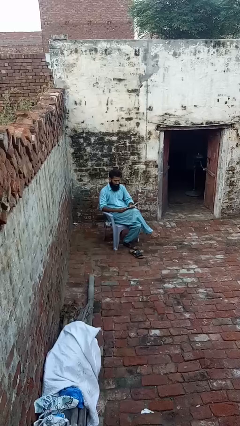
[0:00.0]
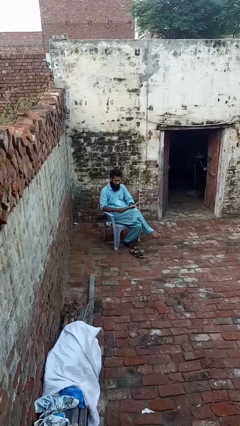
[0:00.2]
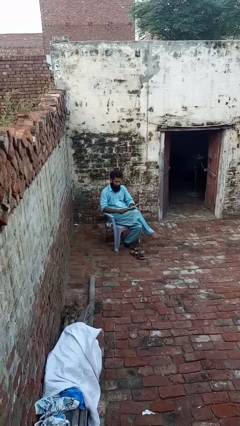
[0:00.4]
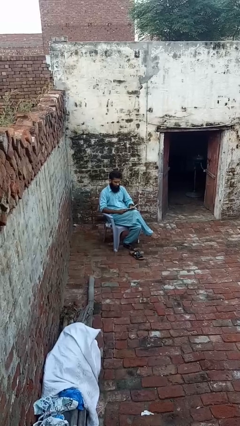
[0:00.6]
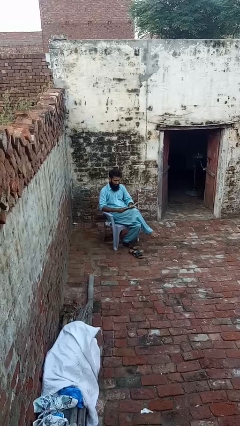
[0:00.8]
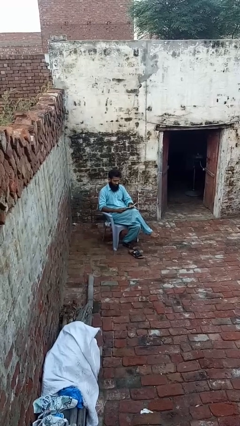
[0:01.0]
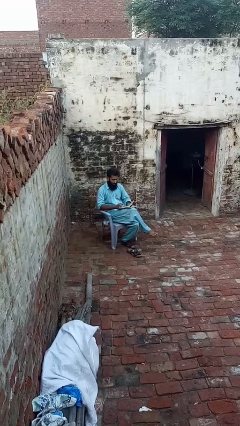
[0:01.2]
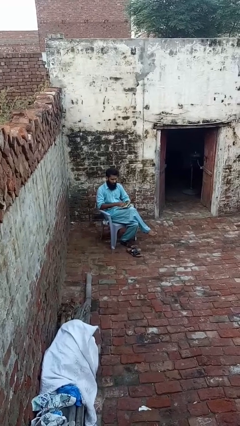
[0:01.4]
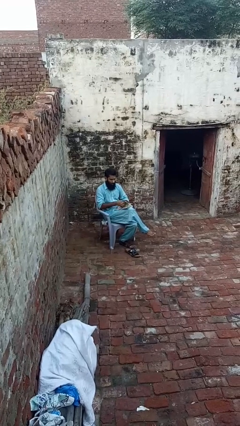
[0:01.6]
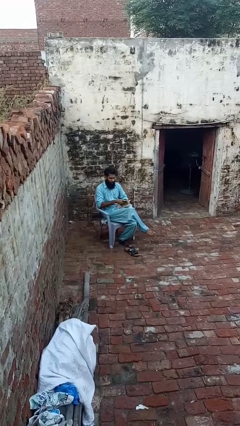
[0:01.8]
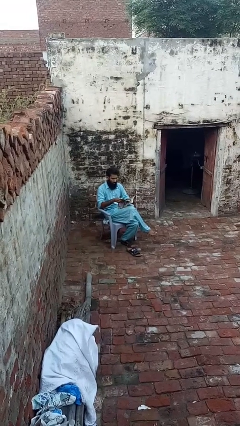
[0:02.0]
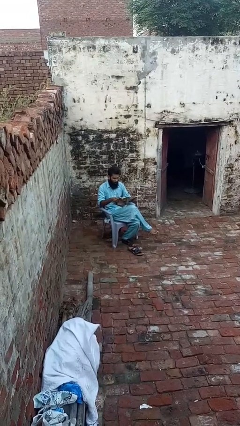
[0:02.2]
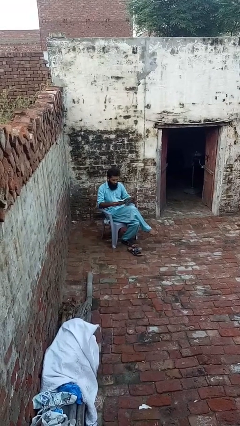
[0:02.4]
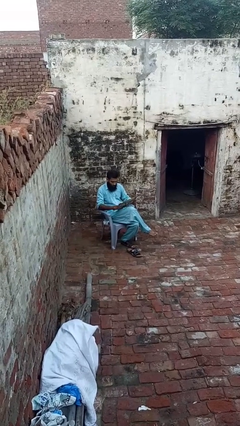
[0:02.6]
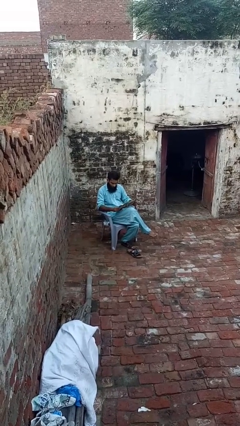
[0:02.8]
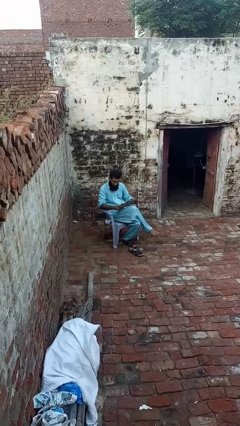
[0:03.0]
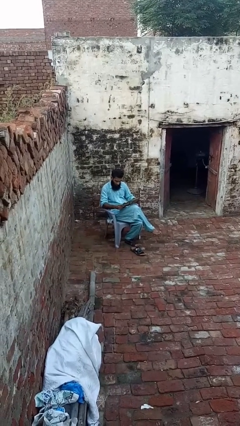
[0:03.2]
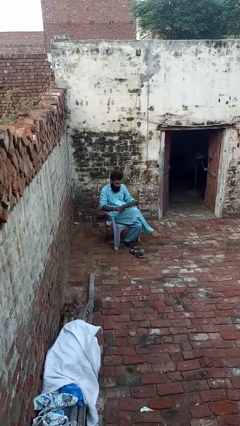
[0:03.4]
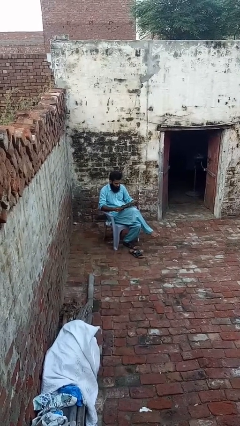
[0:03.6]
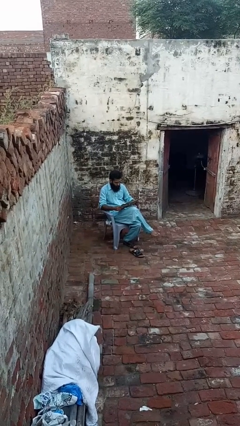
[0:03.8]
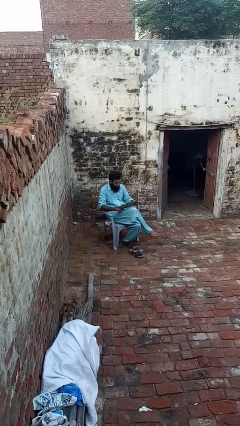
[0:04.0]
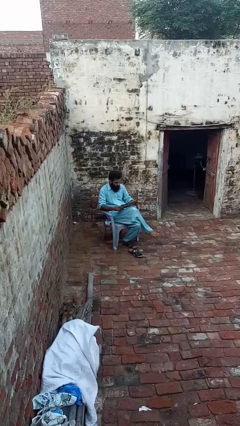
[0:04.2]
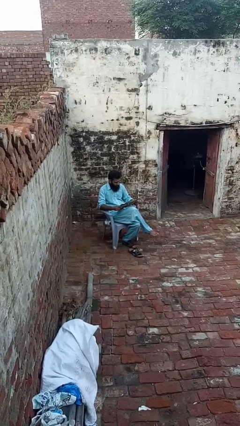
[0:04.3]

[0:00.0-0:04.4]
person reads magazine

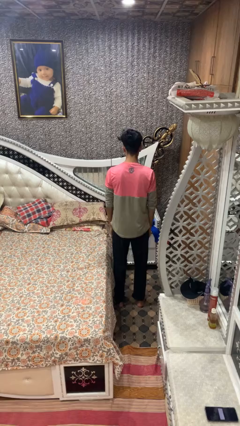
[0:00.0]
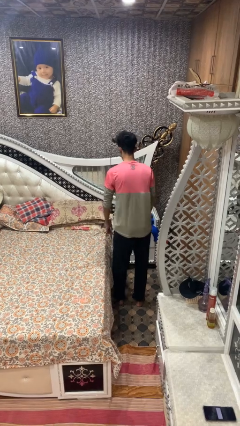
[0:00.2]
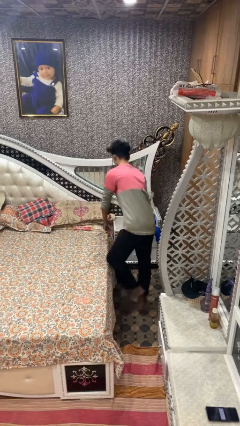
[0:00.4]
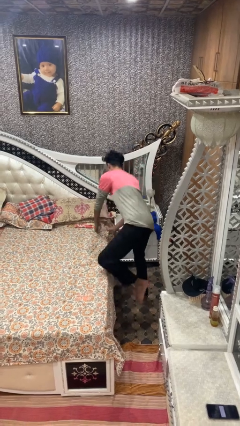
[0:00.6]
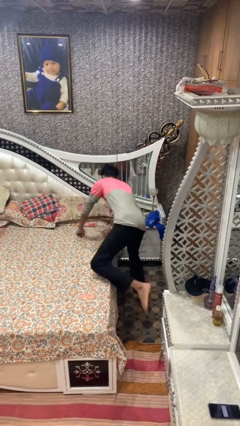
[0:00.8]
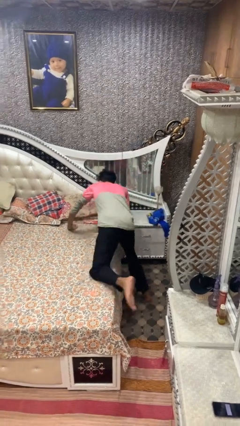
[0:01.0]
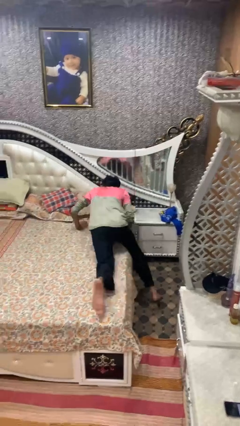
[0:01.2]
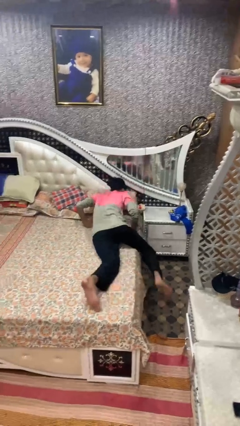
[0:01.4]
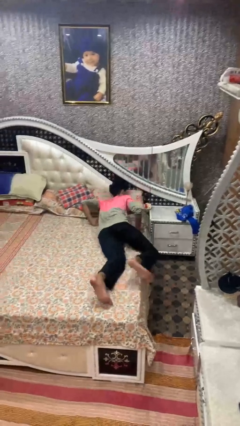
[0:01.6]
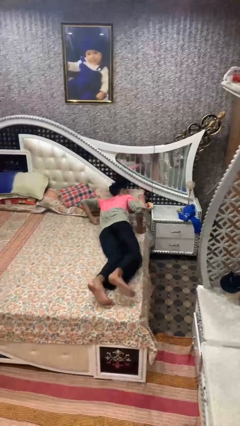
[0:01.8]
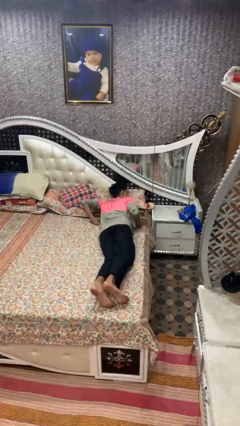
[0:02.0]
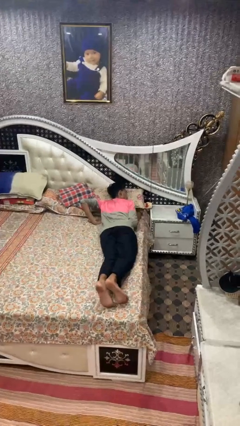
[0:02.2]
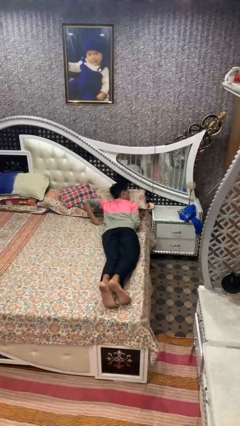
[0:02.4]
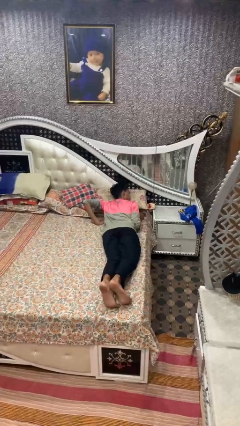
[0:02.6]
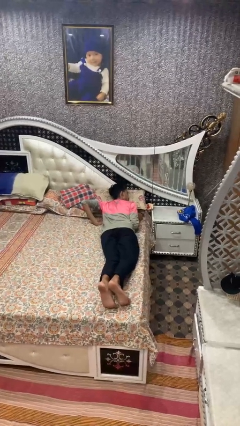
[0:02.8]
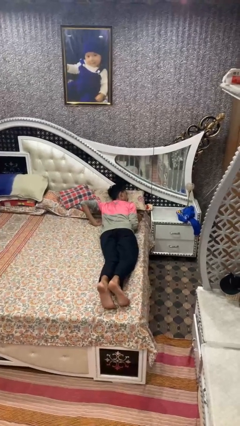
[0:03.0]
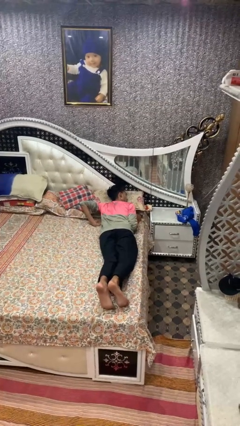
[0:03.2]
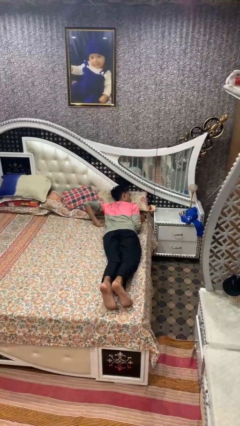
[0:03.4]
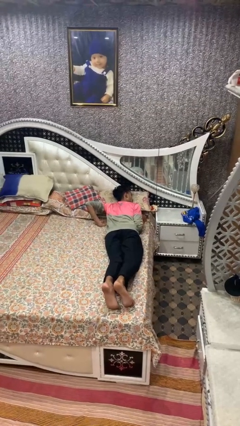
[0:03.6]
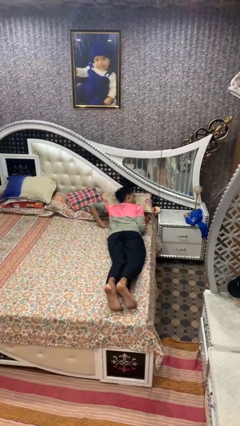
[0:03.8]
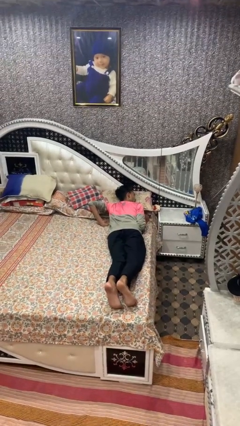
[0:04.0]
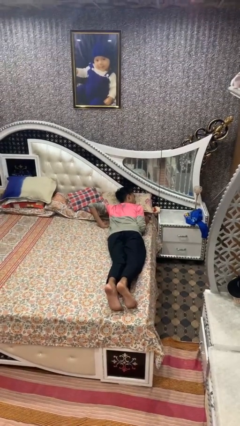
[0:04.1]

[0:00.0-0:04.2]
person lies down on bed

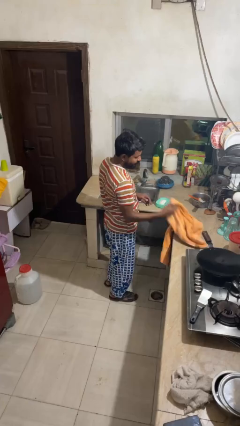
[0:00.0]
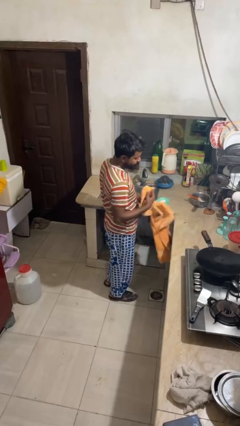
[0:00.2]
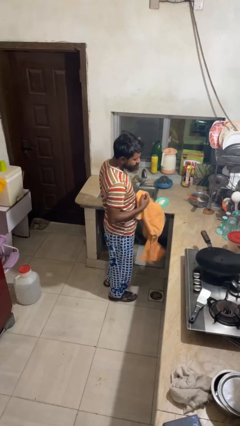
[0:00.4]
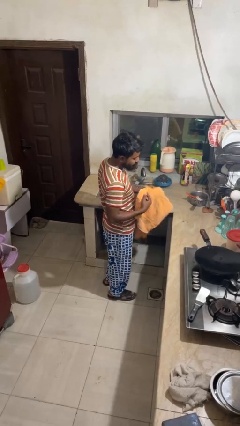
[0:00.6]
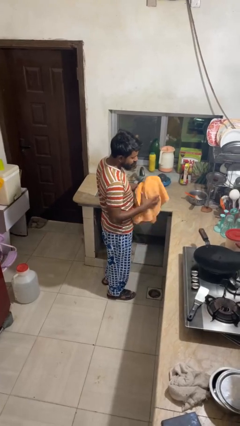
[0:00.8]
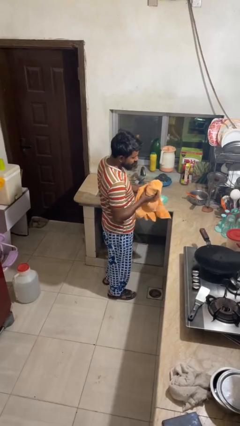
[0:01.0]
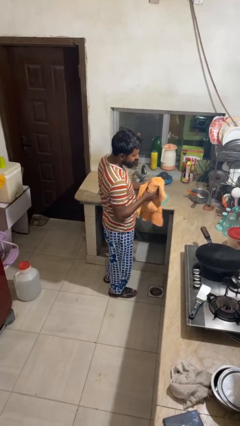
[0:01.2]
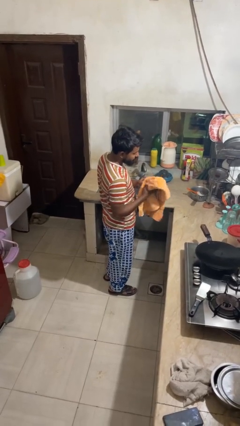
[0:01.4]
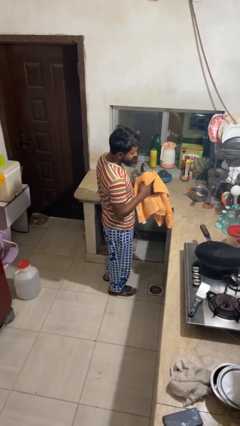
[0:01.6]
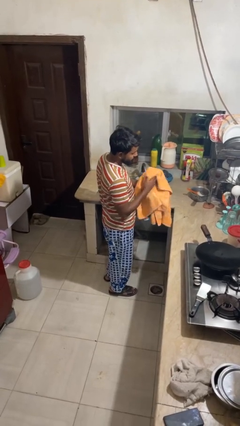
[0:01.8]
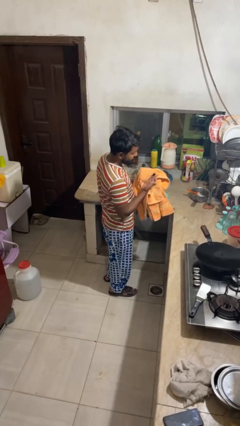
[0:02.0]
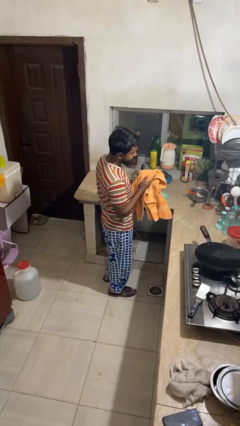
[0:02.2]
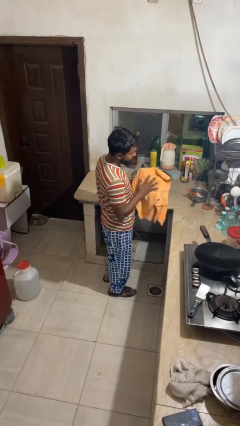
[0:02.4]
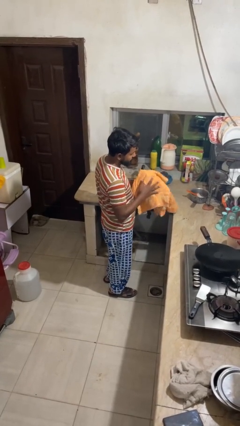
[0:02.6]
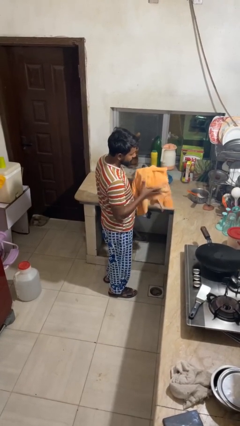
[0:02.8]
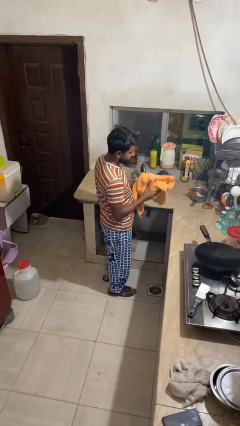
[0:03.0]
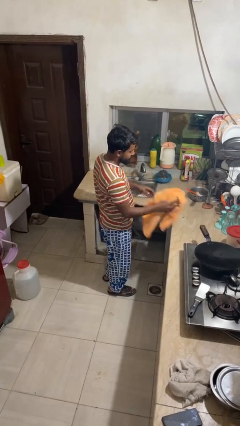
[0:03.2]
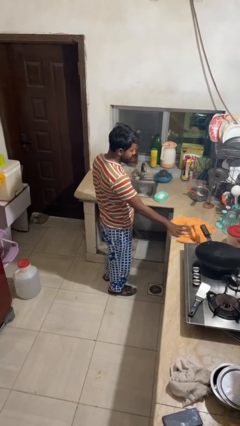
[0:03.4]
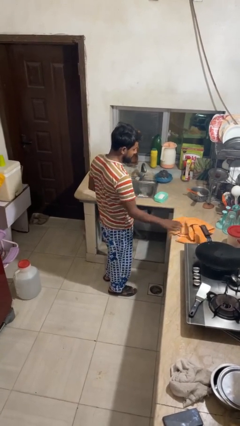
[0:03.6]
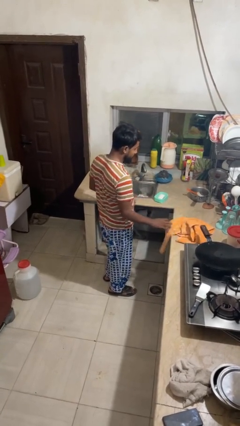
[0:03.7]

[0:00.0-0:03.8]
person dries hands with towel

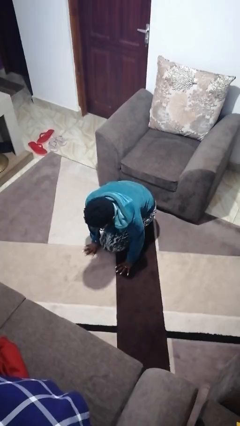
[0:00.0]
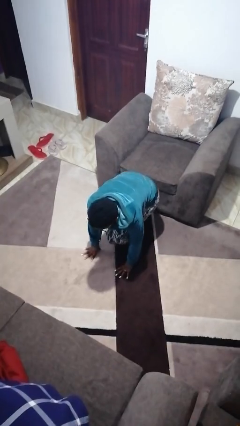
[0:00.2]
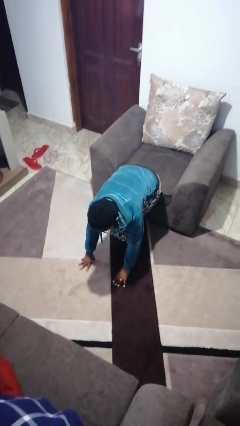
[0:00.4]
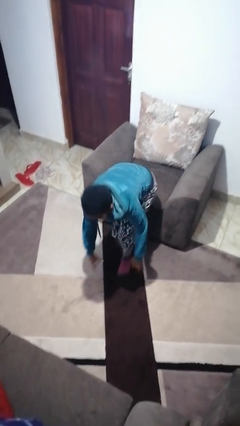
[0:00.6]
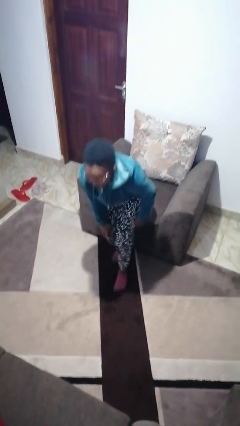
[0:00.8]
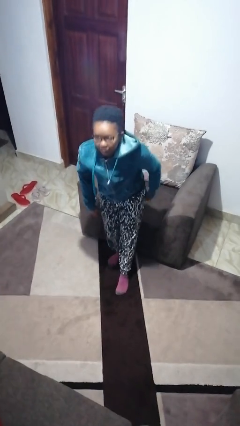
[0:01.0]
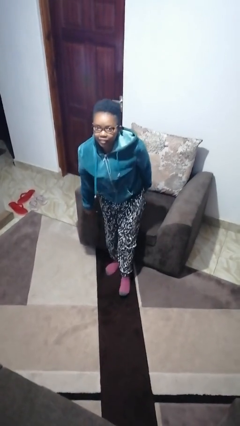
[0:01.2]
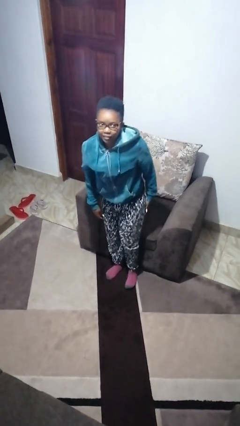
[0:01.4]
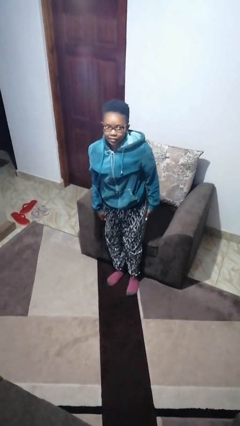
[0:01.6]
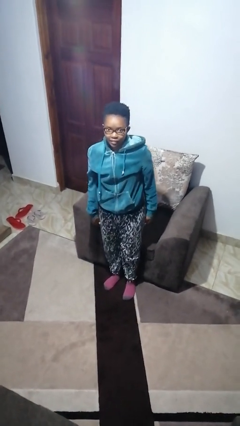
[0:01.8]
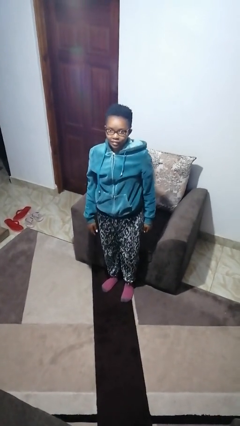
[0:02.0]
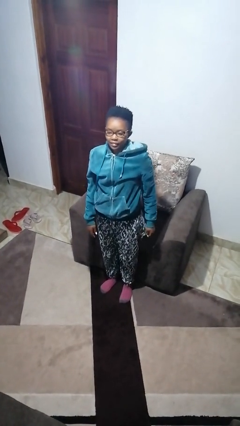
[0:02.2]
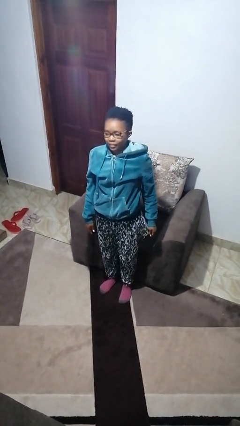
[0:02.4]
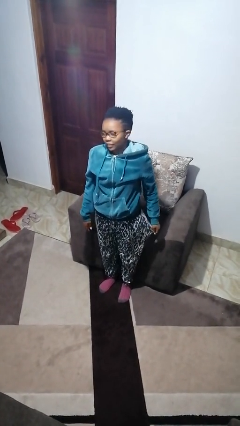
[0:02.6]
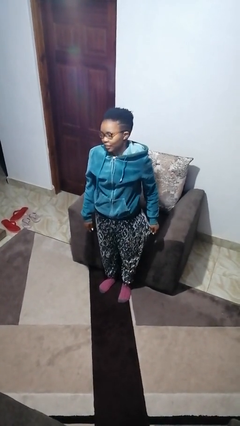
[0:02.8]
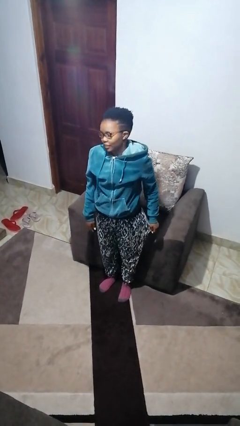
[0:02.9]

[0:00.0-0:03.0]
person stands up from floor

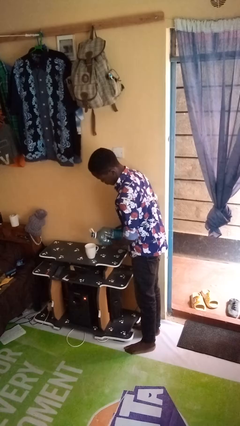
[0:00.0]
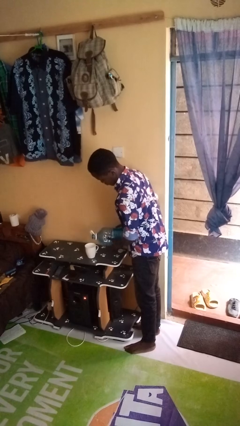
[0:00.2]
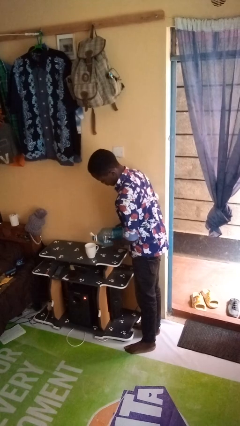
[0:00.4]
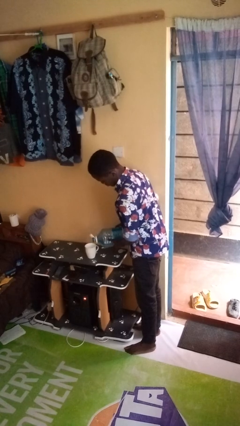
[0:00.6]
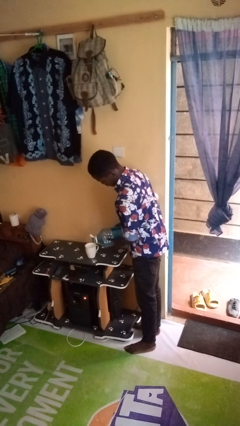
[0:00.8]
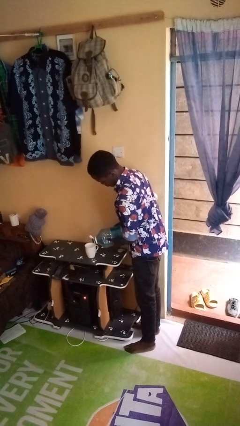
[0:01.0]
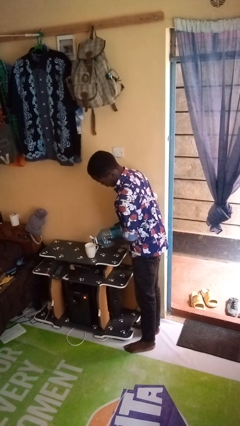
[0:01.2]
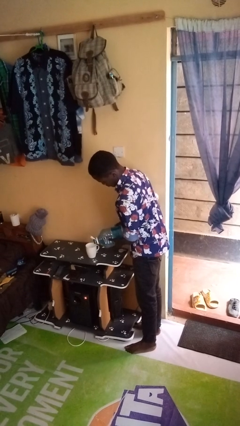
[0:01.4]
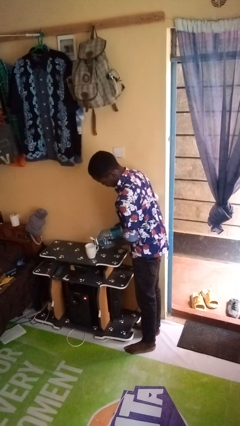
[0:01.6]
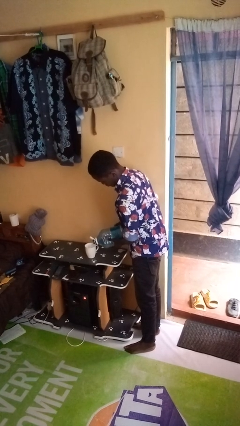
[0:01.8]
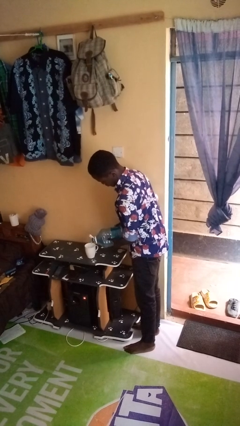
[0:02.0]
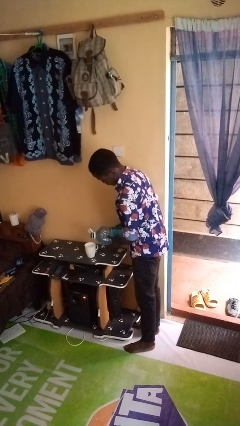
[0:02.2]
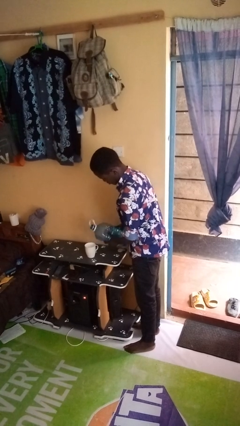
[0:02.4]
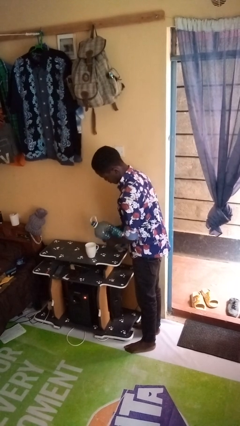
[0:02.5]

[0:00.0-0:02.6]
person pours liquid into cup
